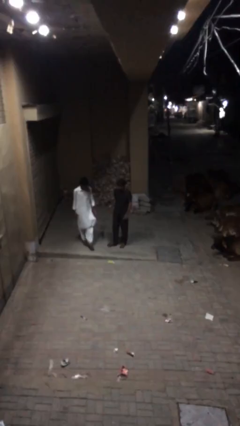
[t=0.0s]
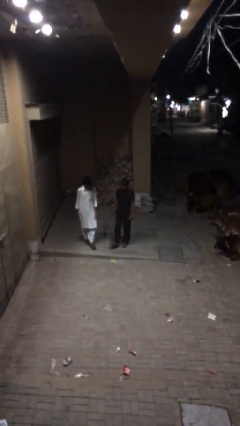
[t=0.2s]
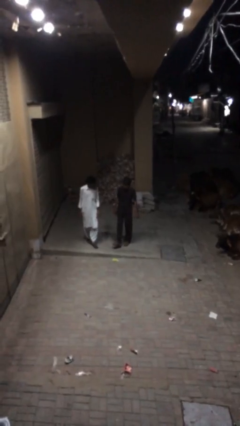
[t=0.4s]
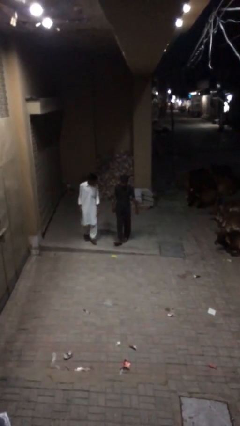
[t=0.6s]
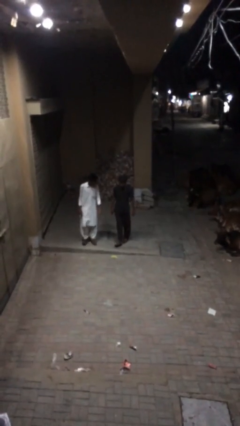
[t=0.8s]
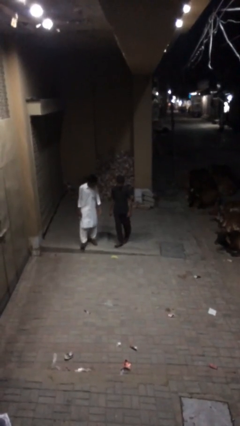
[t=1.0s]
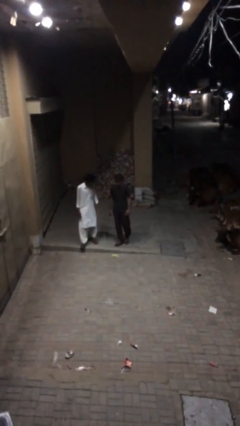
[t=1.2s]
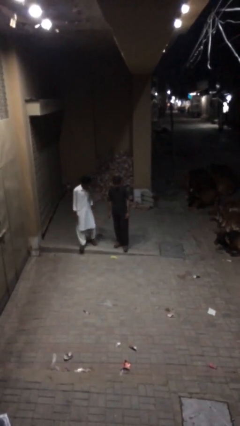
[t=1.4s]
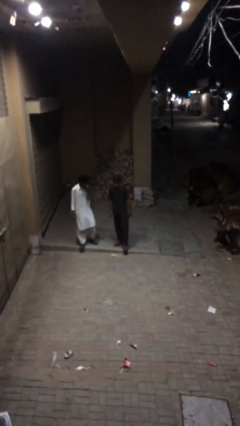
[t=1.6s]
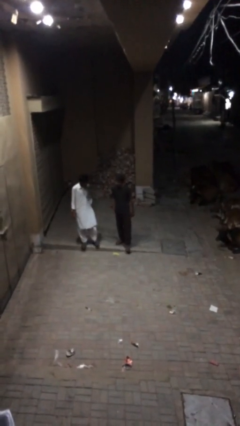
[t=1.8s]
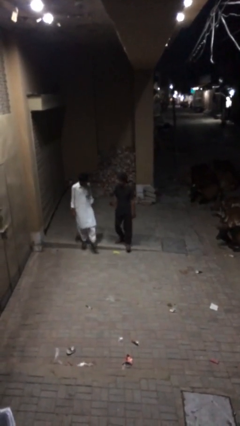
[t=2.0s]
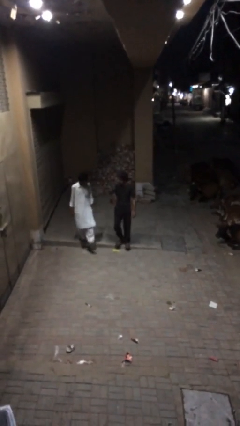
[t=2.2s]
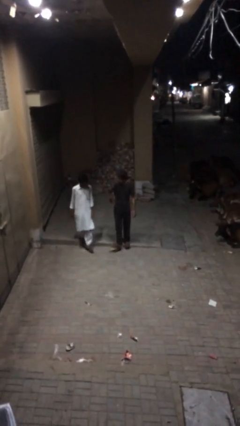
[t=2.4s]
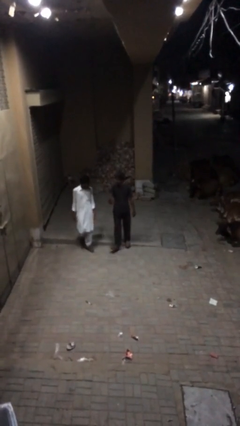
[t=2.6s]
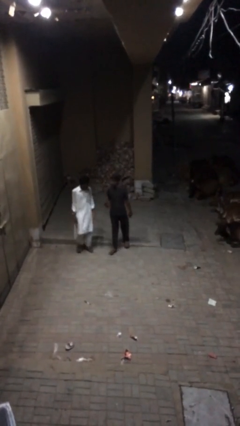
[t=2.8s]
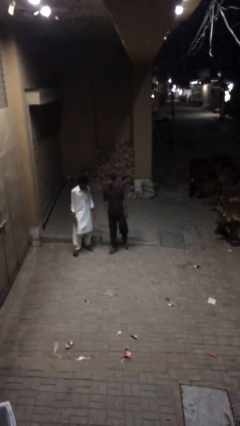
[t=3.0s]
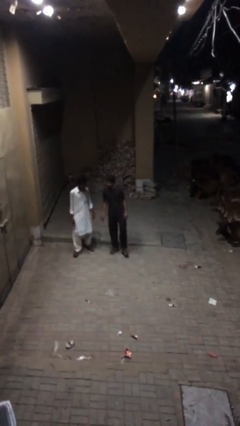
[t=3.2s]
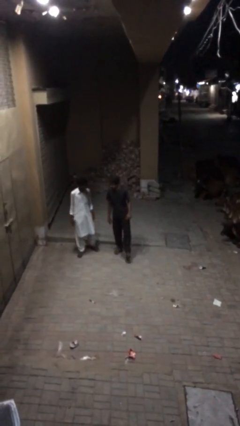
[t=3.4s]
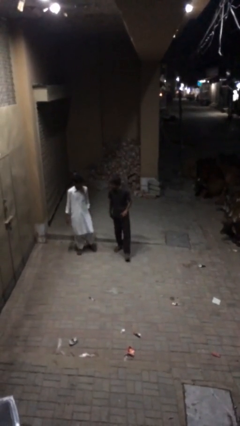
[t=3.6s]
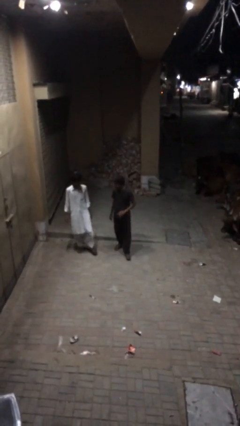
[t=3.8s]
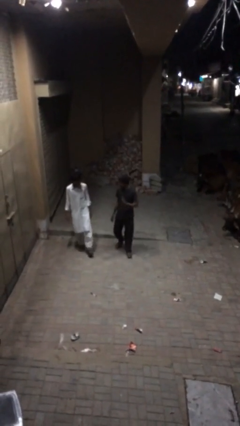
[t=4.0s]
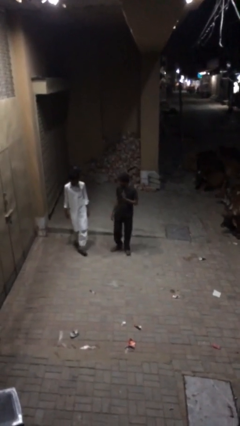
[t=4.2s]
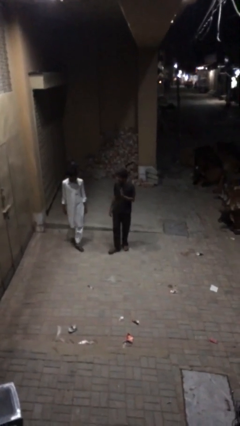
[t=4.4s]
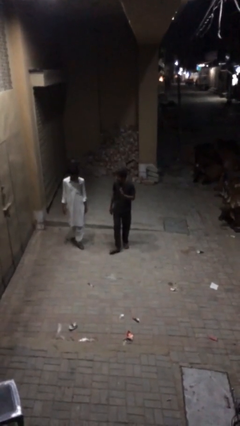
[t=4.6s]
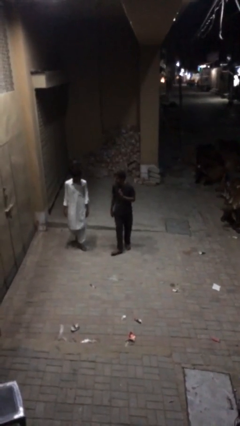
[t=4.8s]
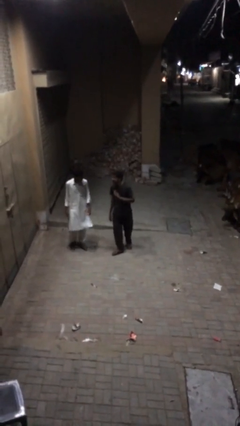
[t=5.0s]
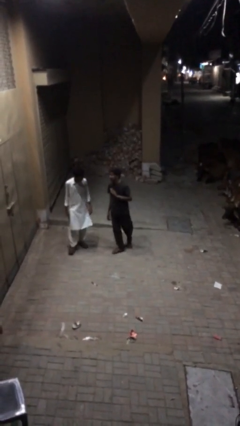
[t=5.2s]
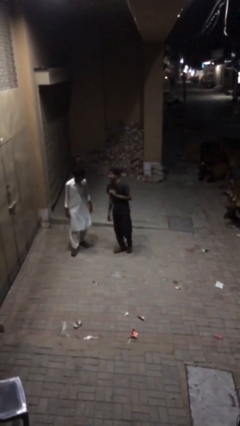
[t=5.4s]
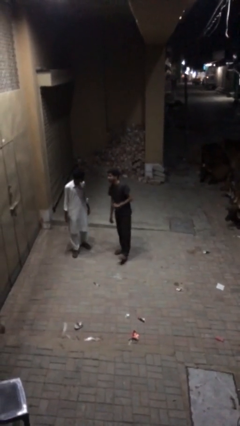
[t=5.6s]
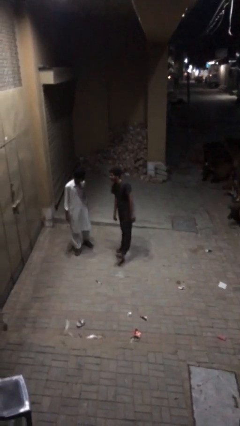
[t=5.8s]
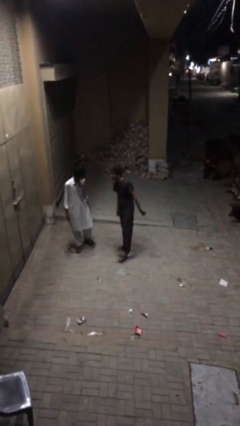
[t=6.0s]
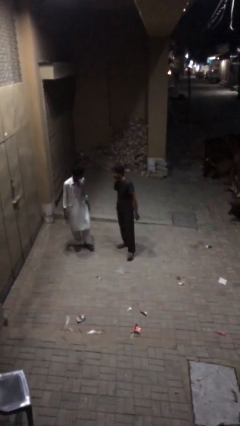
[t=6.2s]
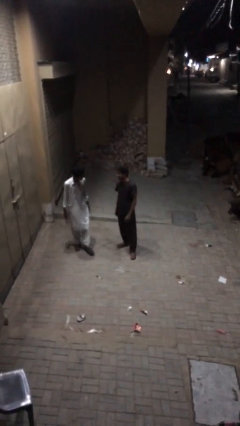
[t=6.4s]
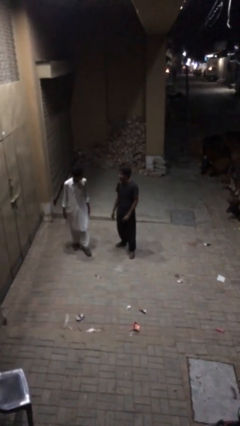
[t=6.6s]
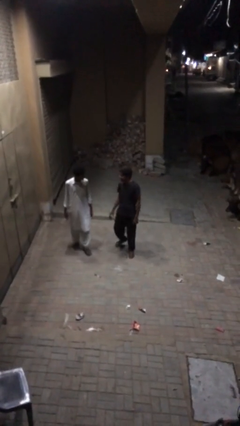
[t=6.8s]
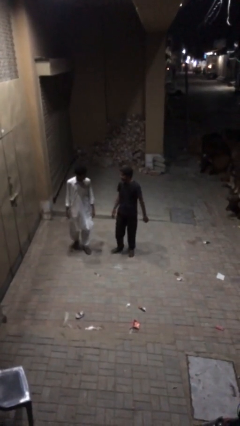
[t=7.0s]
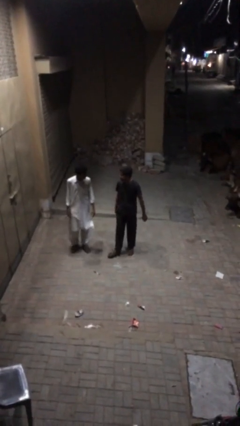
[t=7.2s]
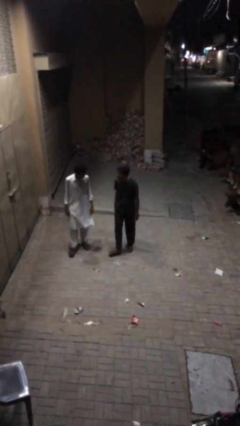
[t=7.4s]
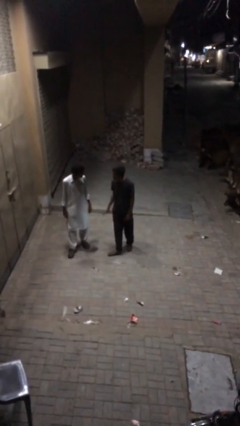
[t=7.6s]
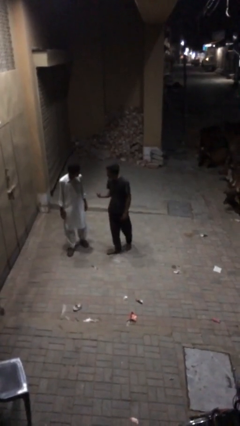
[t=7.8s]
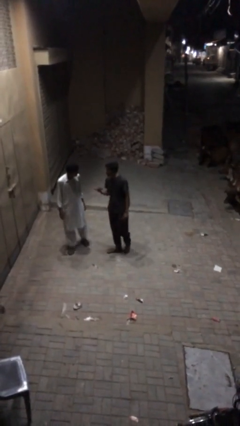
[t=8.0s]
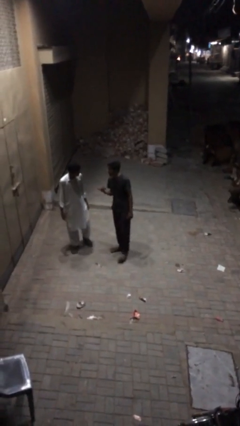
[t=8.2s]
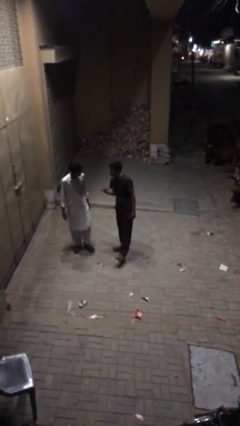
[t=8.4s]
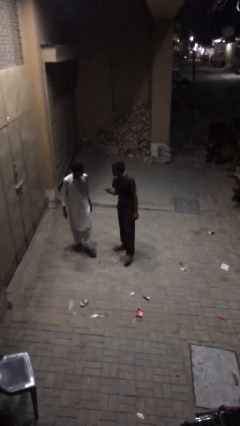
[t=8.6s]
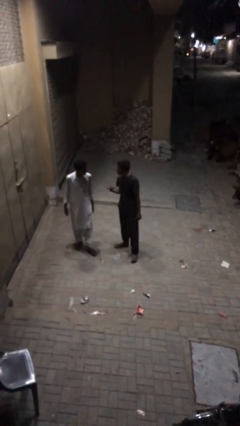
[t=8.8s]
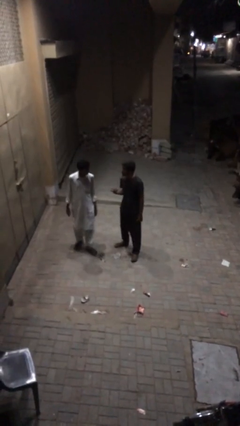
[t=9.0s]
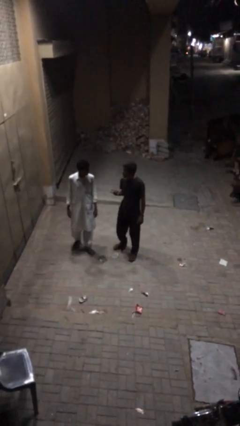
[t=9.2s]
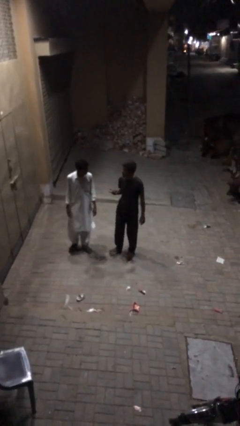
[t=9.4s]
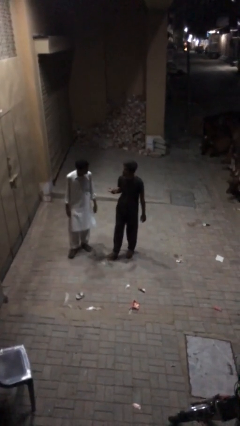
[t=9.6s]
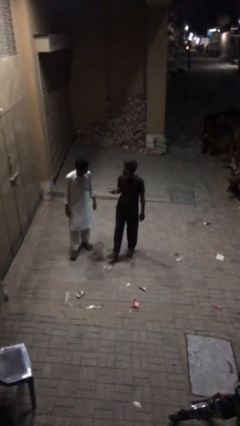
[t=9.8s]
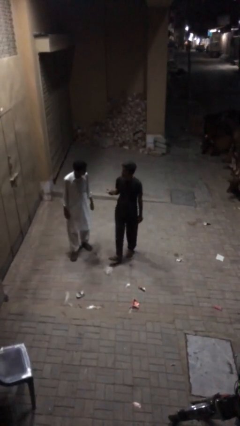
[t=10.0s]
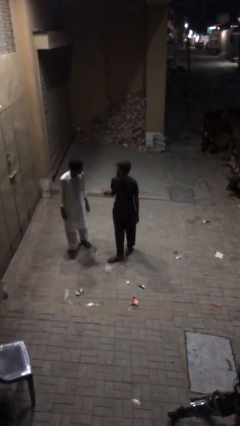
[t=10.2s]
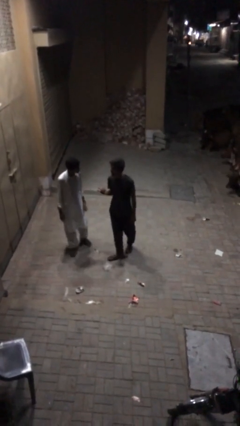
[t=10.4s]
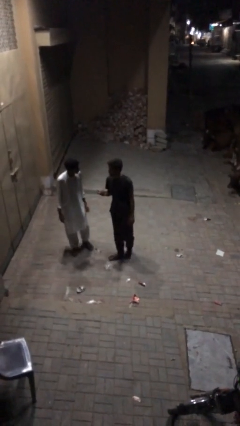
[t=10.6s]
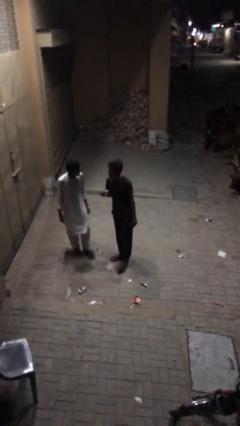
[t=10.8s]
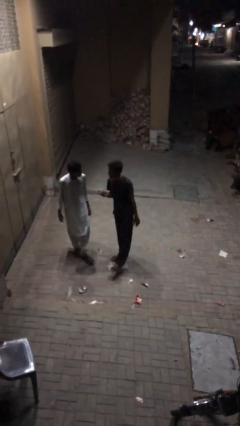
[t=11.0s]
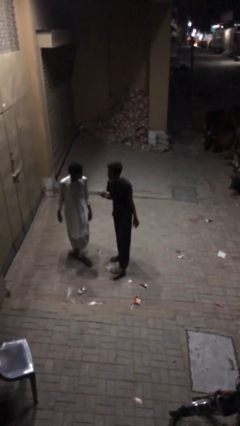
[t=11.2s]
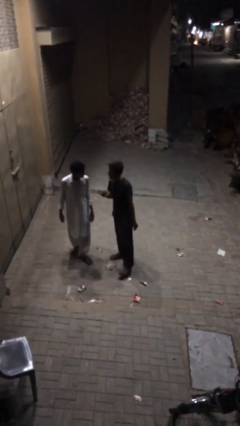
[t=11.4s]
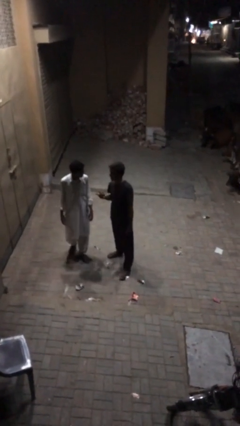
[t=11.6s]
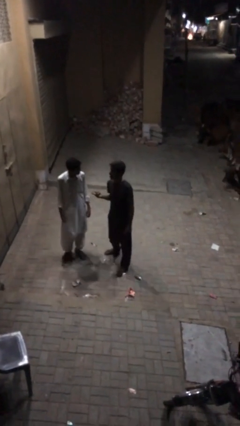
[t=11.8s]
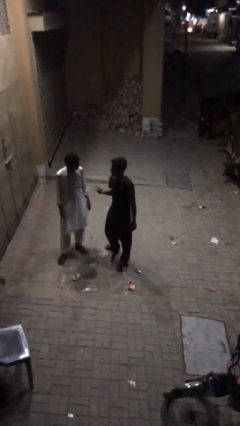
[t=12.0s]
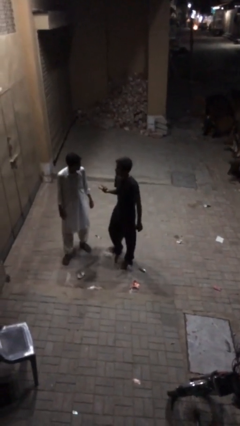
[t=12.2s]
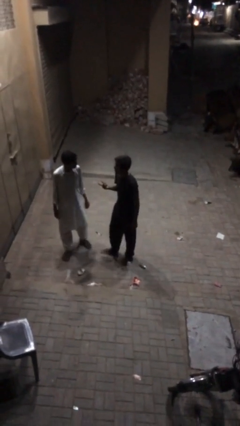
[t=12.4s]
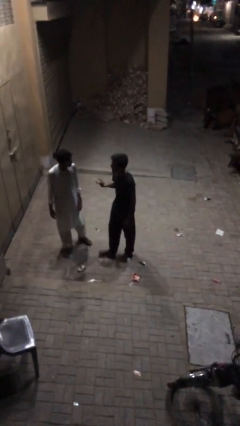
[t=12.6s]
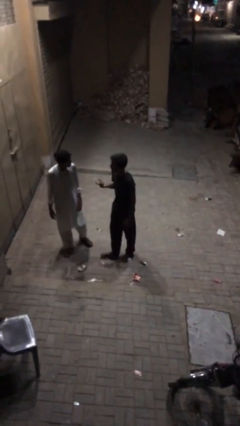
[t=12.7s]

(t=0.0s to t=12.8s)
person talks to person

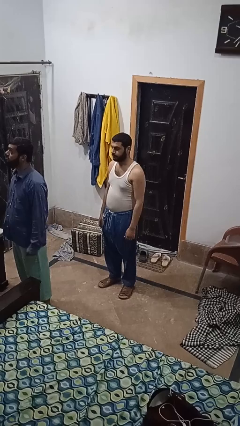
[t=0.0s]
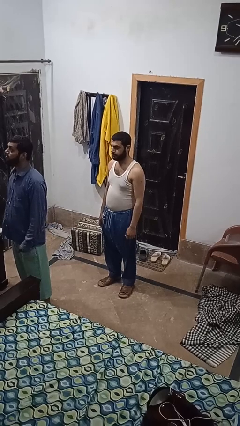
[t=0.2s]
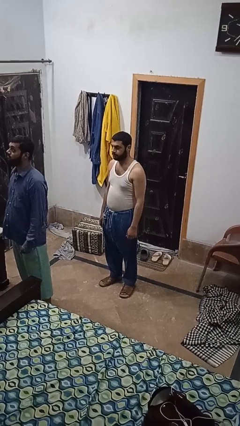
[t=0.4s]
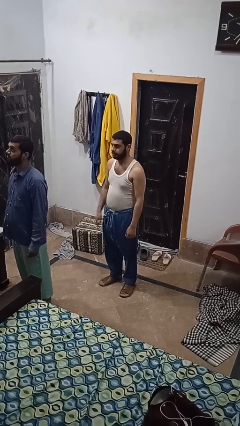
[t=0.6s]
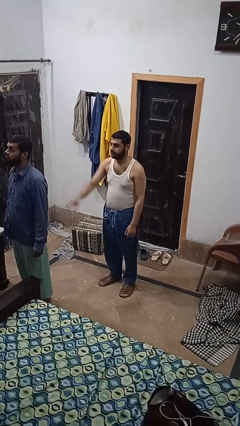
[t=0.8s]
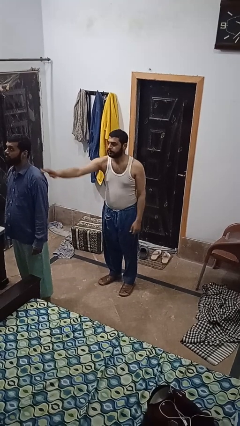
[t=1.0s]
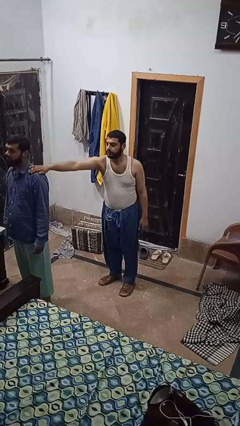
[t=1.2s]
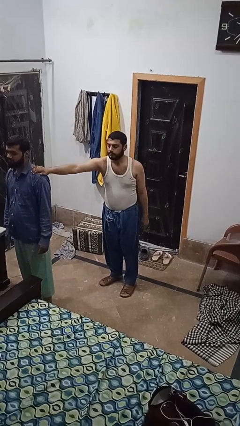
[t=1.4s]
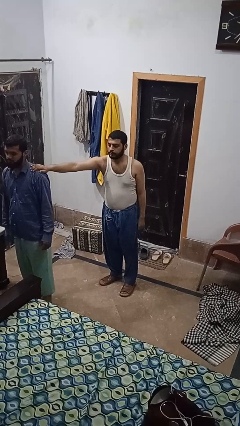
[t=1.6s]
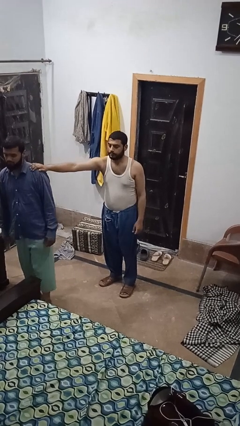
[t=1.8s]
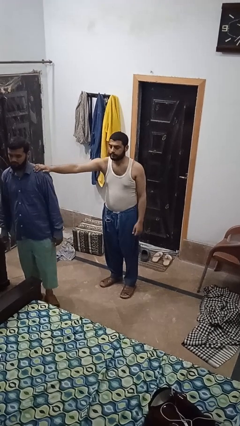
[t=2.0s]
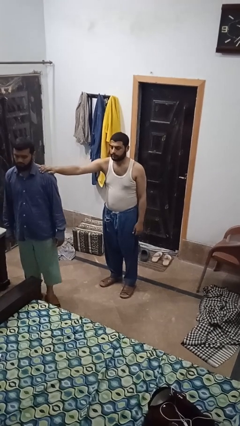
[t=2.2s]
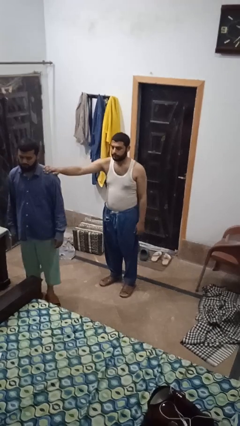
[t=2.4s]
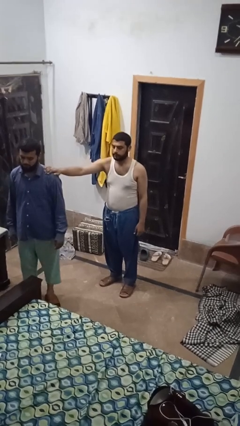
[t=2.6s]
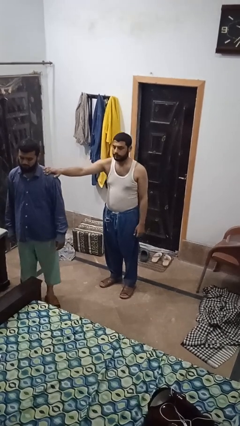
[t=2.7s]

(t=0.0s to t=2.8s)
person grabs person by shoulder

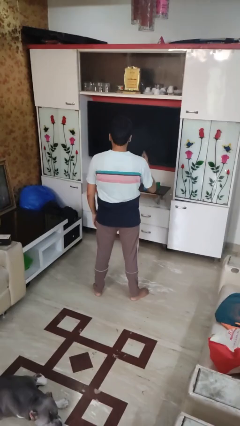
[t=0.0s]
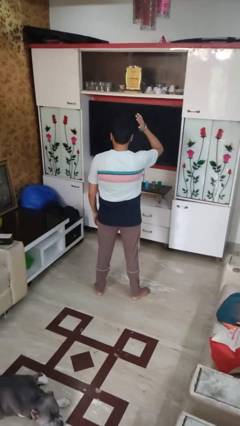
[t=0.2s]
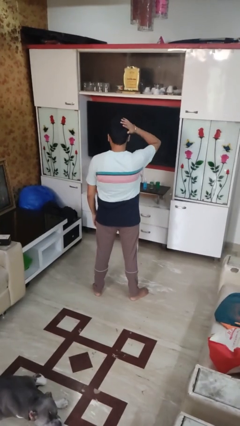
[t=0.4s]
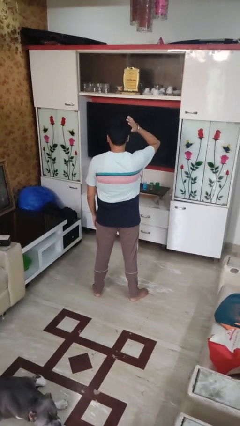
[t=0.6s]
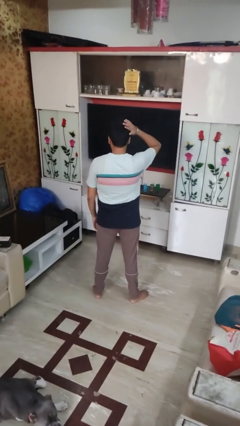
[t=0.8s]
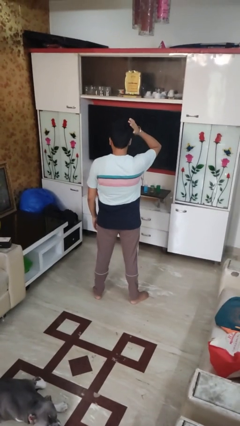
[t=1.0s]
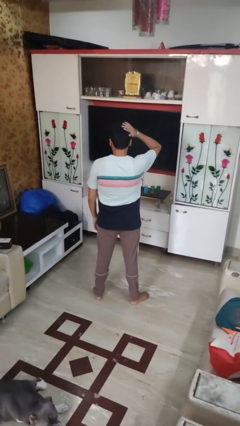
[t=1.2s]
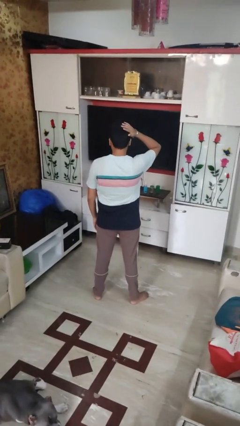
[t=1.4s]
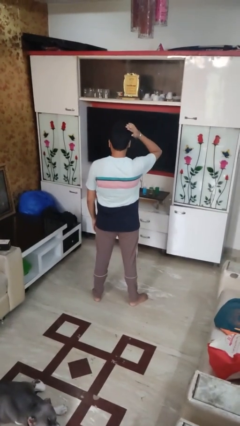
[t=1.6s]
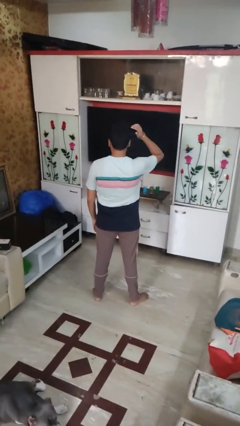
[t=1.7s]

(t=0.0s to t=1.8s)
person pats head

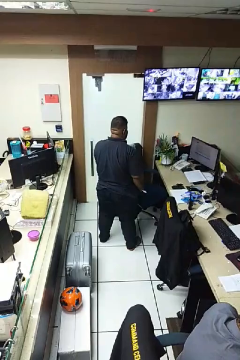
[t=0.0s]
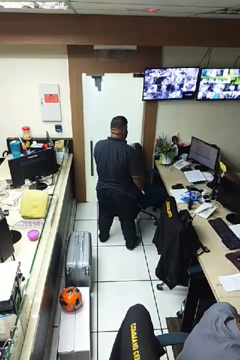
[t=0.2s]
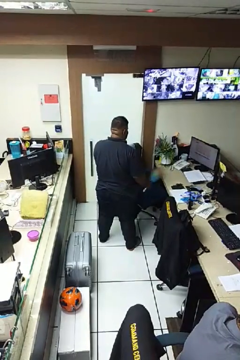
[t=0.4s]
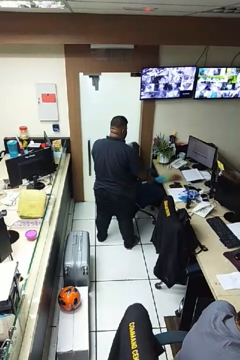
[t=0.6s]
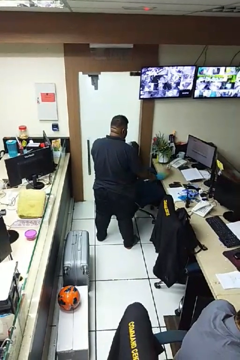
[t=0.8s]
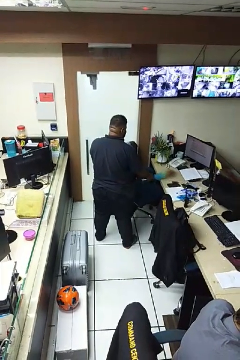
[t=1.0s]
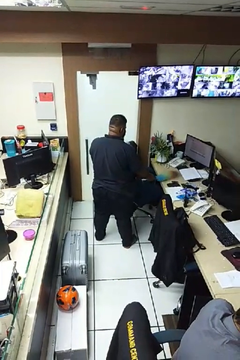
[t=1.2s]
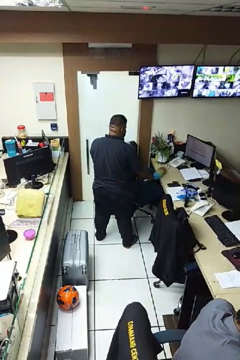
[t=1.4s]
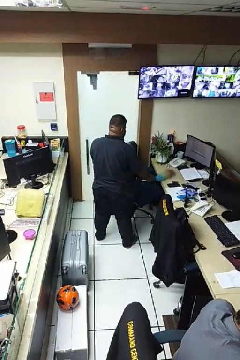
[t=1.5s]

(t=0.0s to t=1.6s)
person dusts furniture
